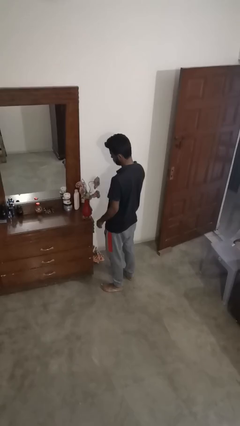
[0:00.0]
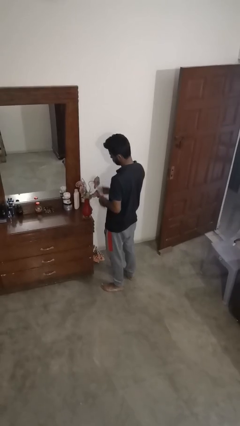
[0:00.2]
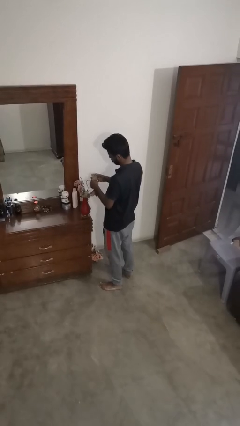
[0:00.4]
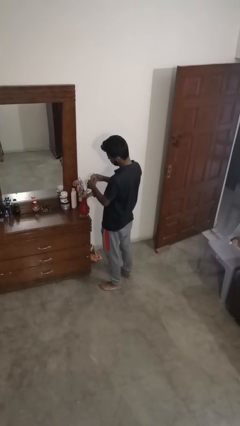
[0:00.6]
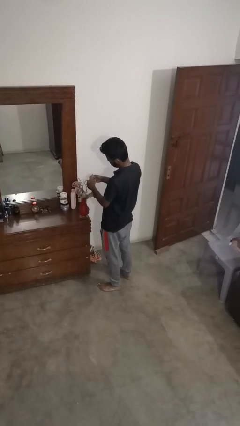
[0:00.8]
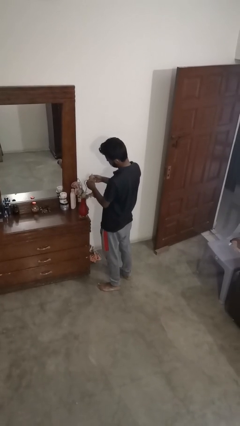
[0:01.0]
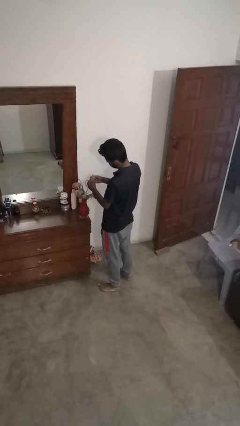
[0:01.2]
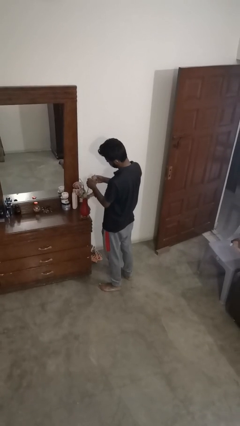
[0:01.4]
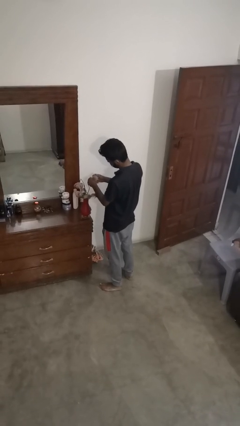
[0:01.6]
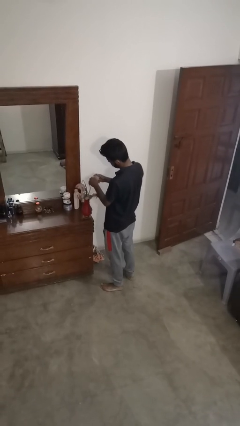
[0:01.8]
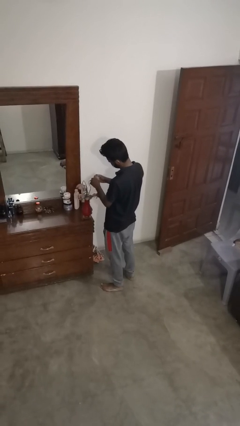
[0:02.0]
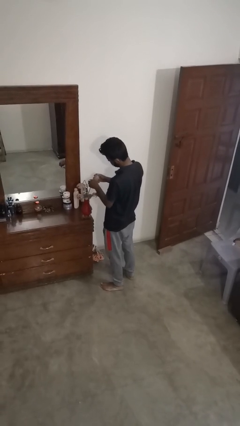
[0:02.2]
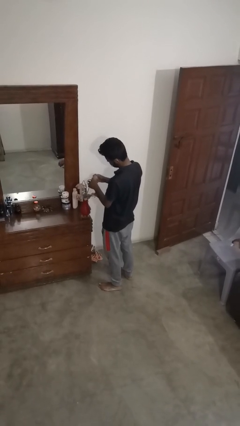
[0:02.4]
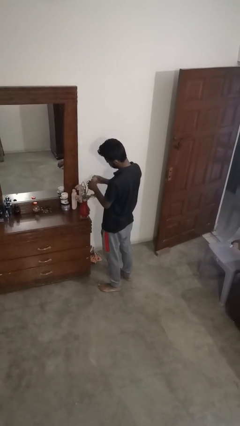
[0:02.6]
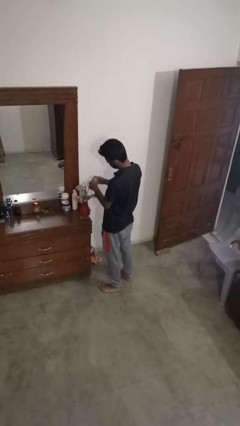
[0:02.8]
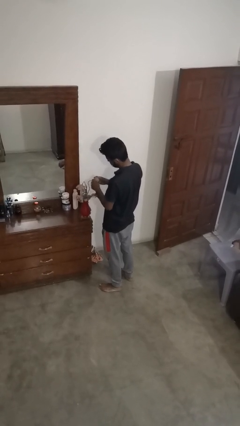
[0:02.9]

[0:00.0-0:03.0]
person arranges flowers in vase

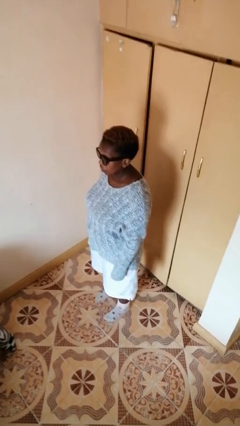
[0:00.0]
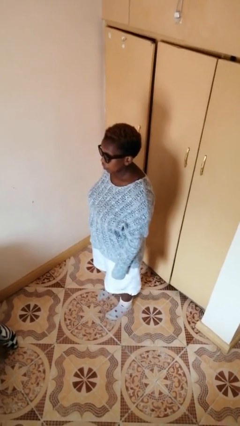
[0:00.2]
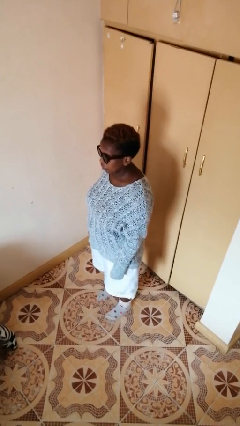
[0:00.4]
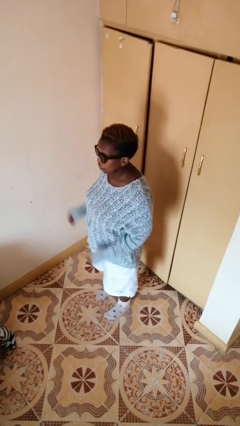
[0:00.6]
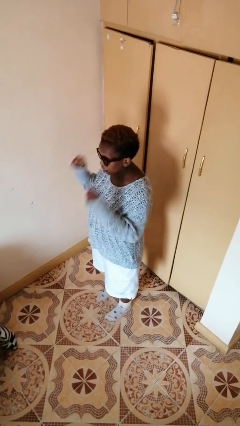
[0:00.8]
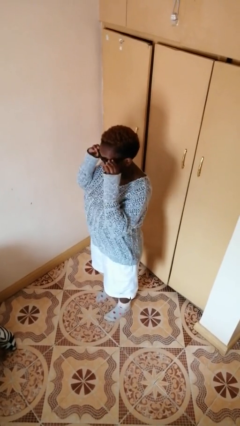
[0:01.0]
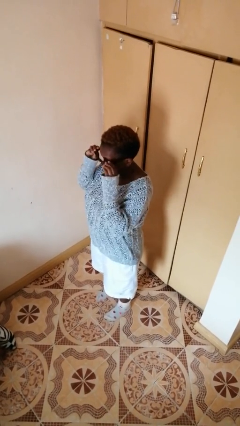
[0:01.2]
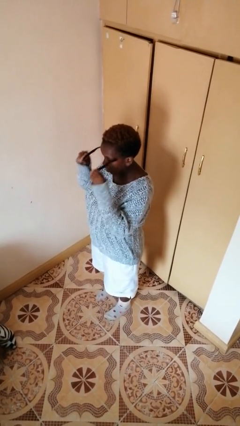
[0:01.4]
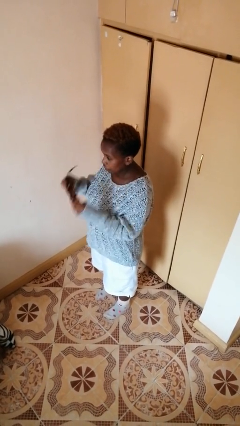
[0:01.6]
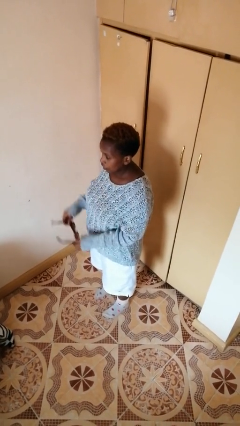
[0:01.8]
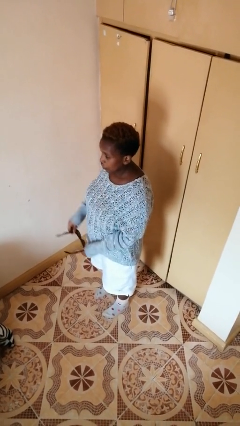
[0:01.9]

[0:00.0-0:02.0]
person takes off sunglasses

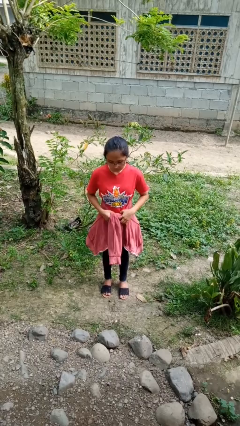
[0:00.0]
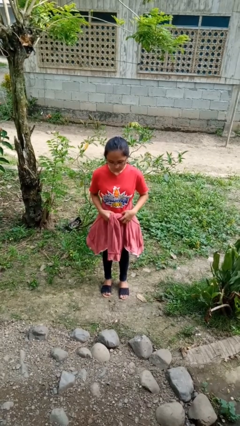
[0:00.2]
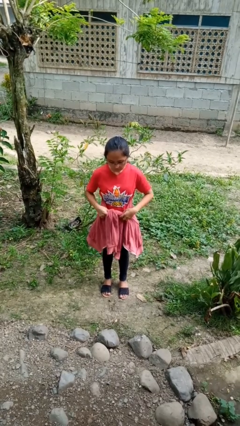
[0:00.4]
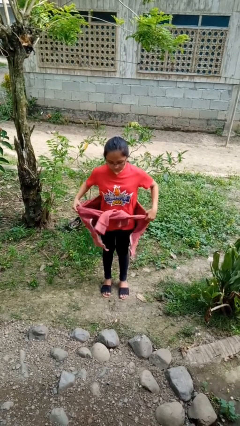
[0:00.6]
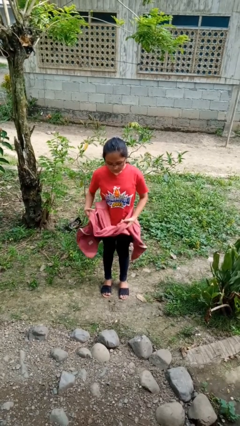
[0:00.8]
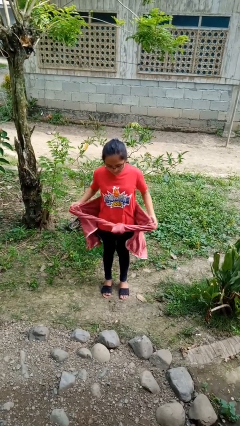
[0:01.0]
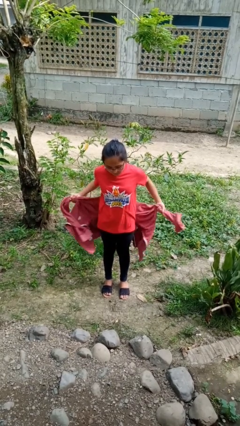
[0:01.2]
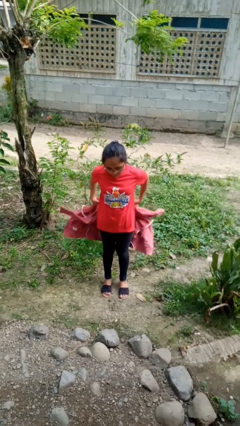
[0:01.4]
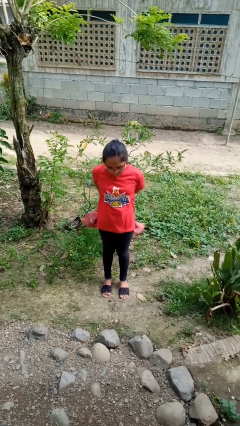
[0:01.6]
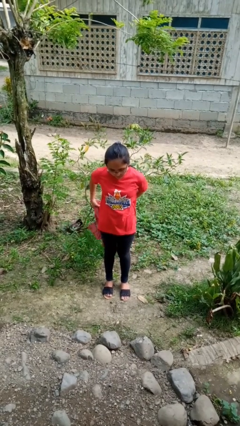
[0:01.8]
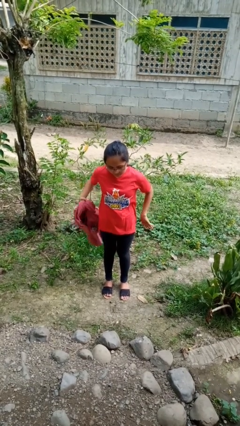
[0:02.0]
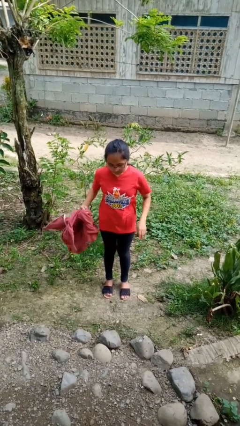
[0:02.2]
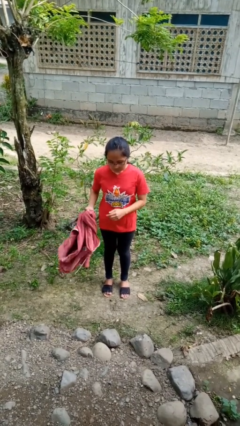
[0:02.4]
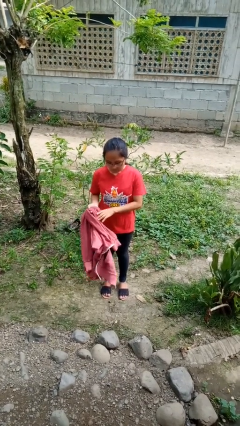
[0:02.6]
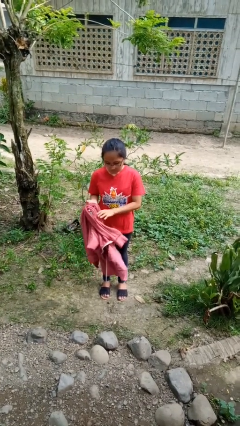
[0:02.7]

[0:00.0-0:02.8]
person unties jacket around waist

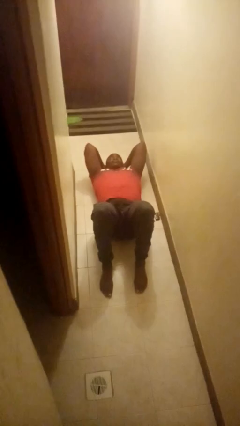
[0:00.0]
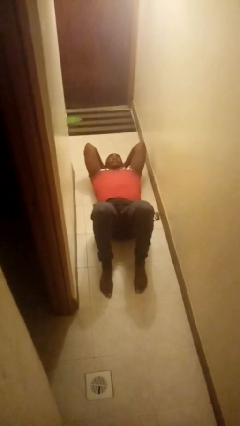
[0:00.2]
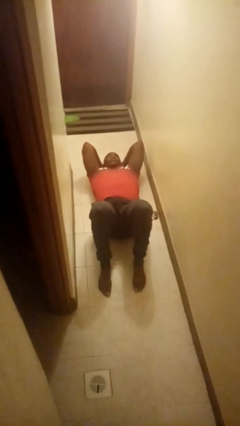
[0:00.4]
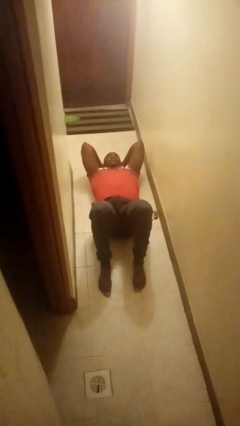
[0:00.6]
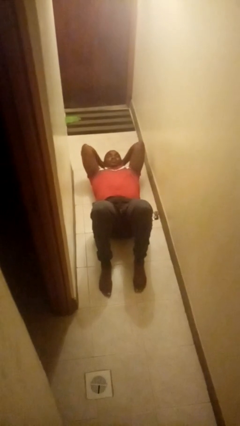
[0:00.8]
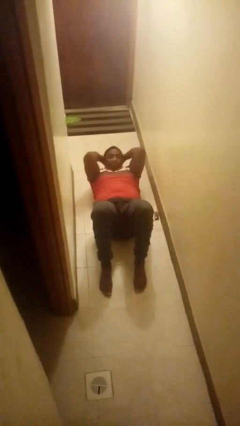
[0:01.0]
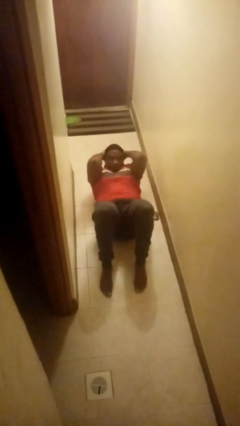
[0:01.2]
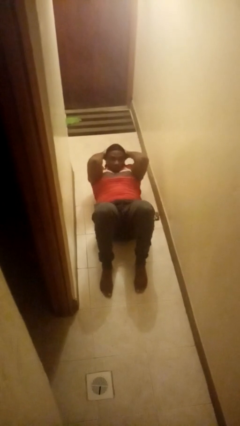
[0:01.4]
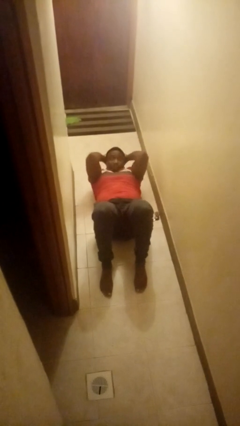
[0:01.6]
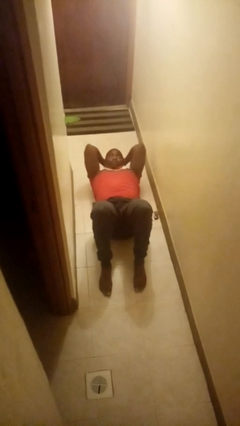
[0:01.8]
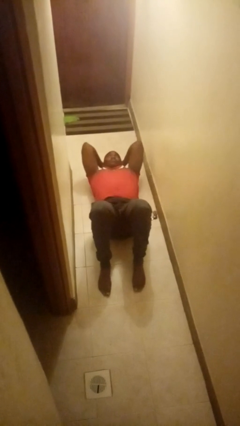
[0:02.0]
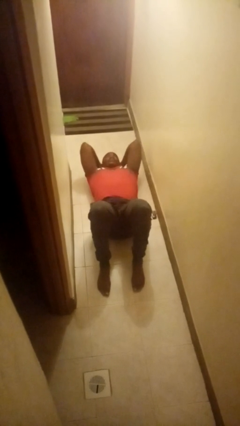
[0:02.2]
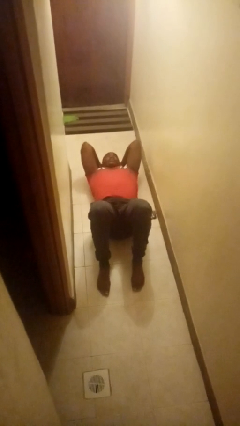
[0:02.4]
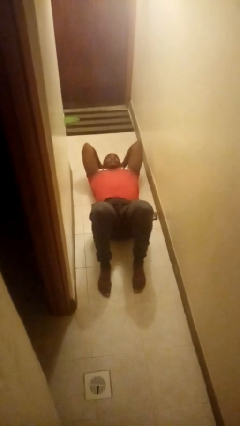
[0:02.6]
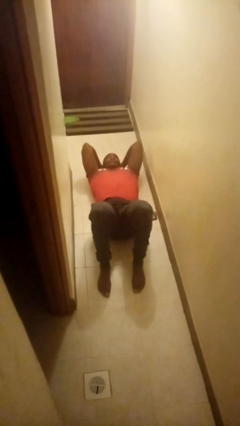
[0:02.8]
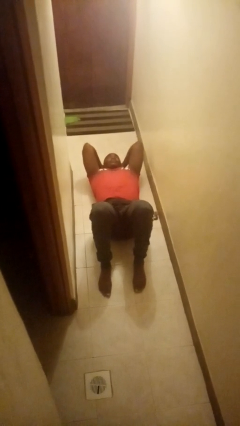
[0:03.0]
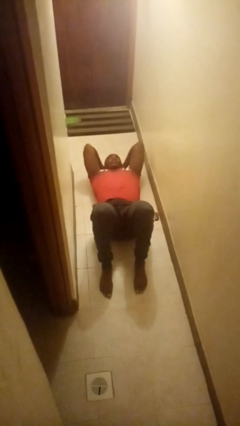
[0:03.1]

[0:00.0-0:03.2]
person exercises with situp

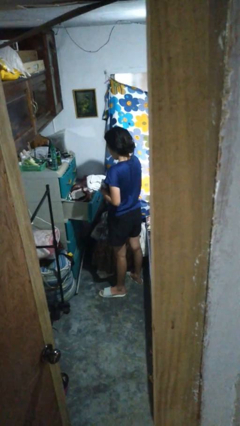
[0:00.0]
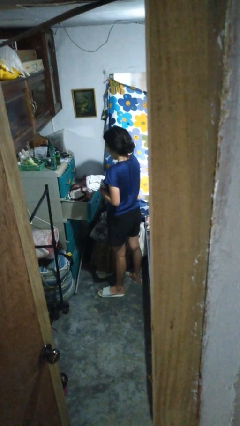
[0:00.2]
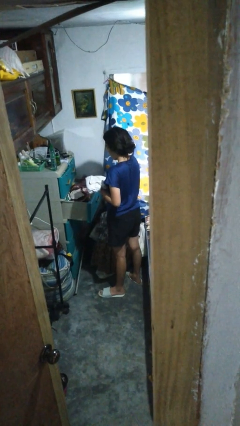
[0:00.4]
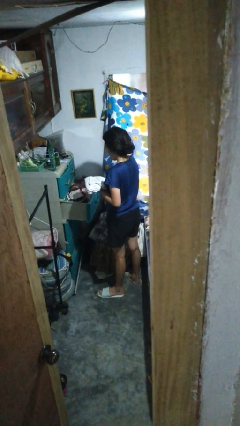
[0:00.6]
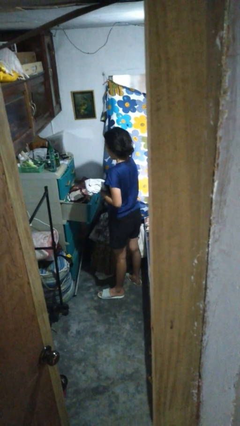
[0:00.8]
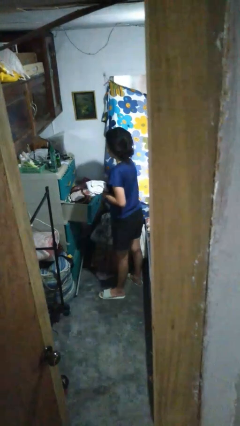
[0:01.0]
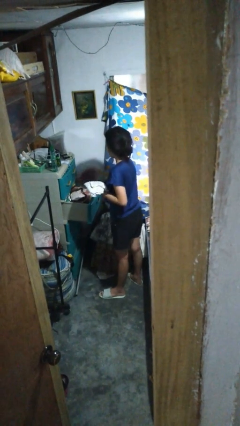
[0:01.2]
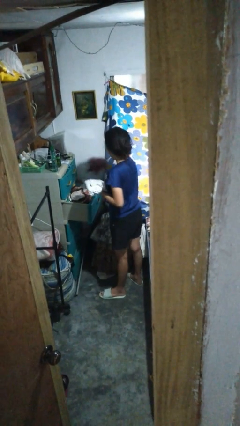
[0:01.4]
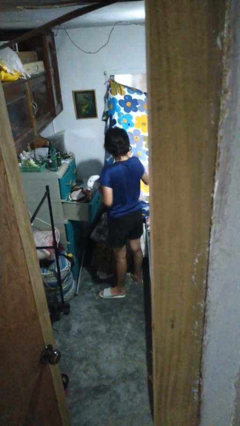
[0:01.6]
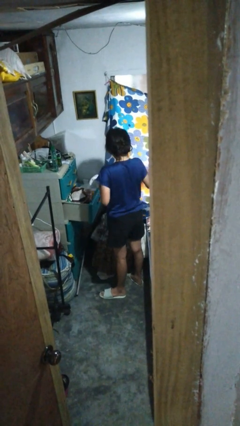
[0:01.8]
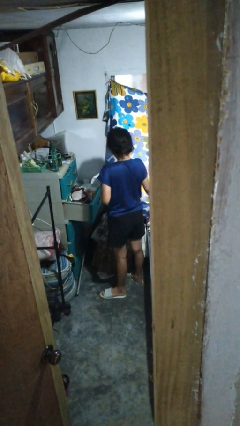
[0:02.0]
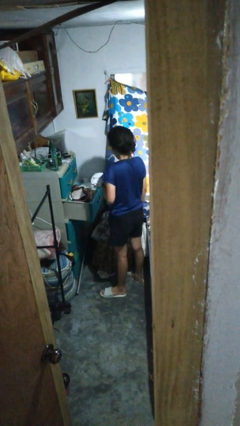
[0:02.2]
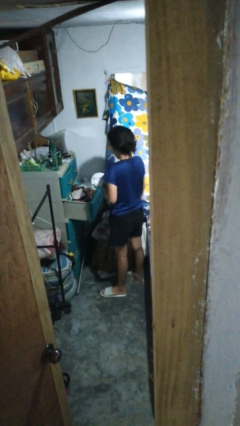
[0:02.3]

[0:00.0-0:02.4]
person takes clothes from dresser

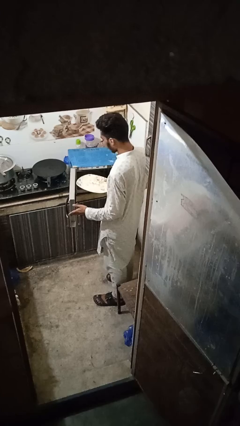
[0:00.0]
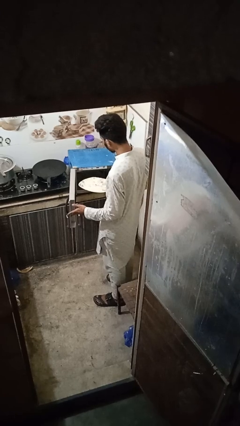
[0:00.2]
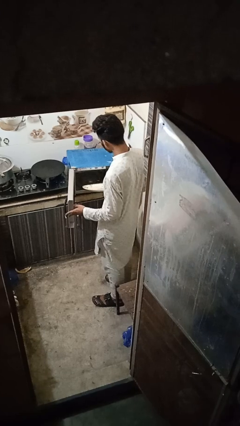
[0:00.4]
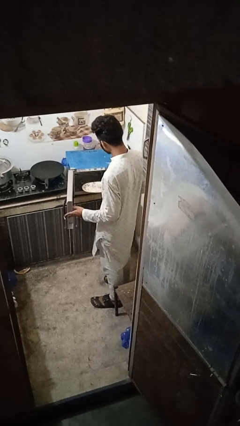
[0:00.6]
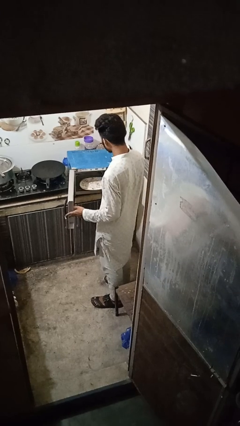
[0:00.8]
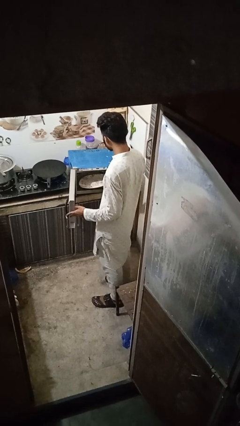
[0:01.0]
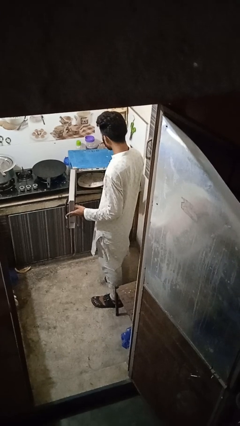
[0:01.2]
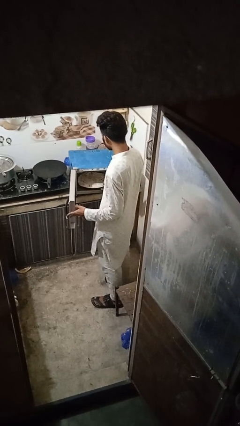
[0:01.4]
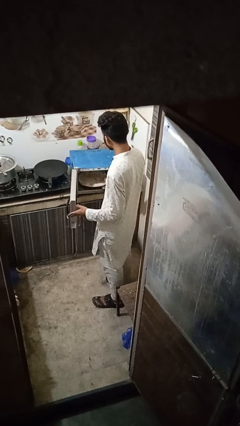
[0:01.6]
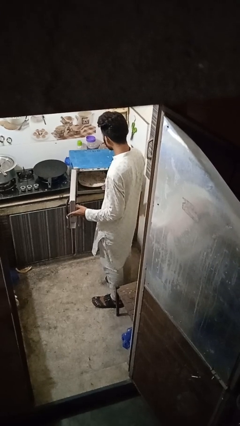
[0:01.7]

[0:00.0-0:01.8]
person puts object into oven

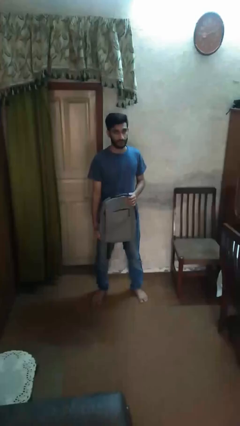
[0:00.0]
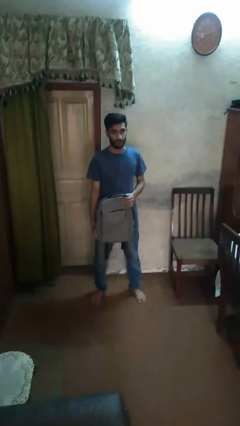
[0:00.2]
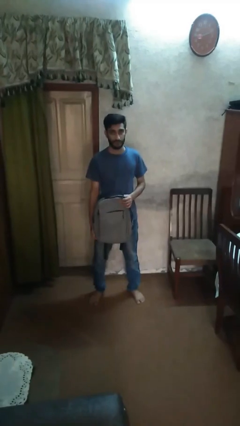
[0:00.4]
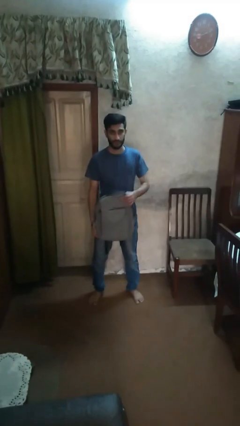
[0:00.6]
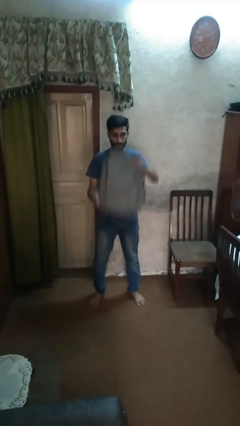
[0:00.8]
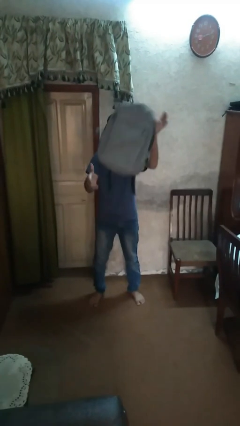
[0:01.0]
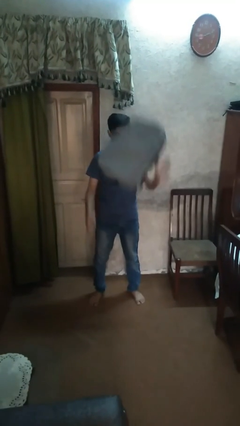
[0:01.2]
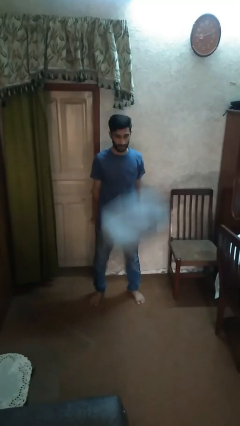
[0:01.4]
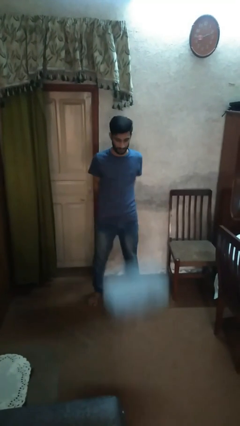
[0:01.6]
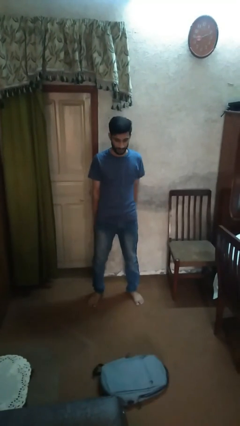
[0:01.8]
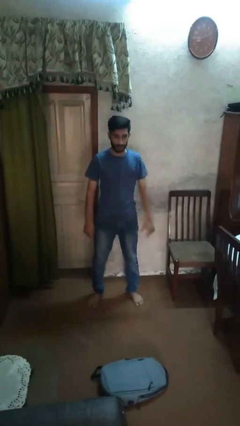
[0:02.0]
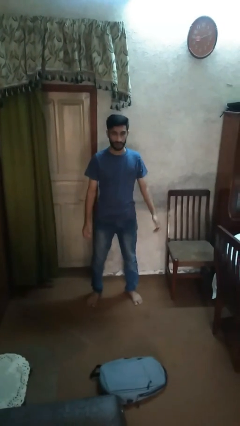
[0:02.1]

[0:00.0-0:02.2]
person throws object into air
